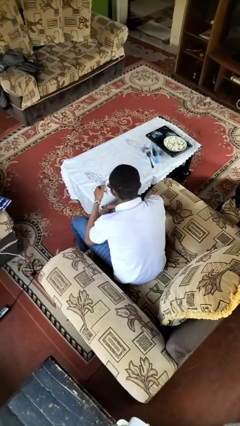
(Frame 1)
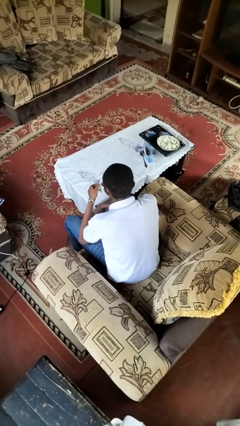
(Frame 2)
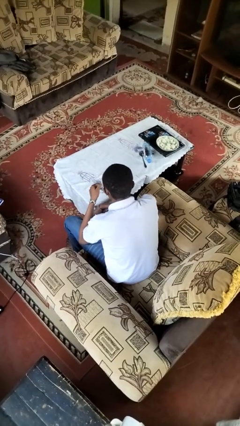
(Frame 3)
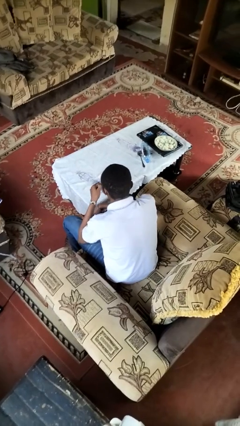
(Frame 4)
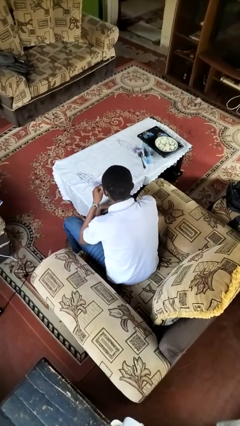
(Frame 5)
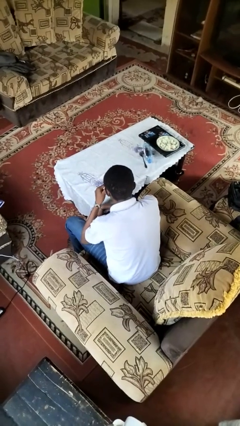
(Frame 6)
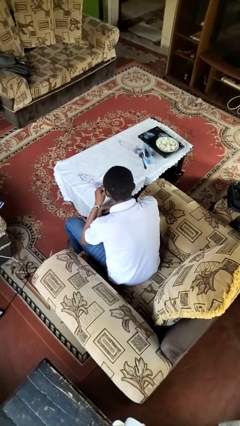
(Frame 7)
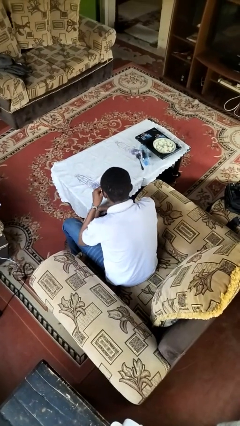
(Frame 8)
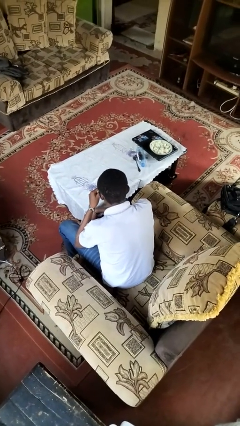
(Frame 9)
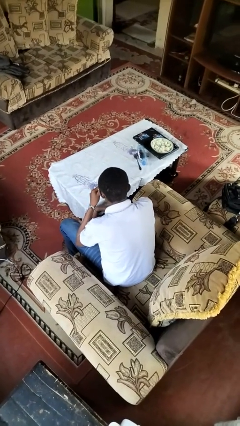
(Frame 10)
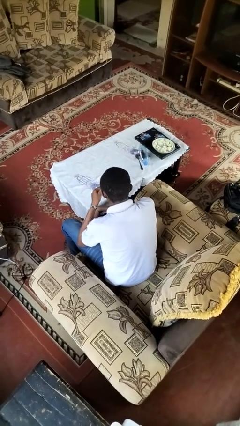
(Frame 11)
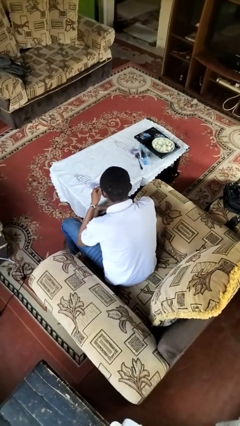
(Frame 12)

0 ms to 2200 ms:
person drinks from mug

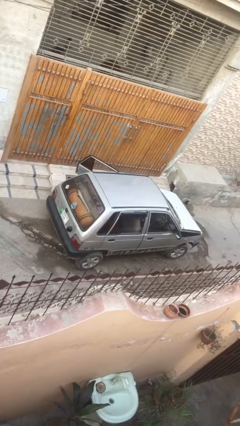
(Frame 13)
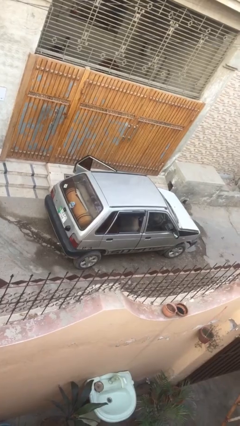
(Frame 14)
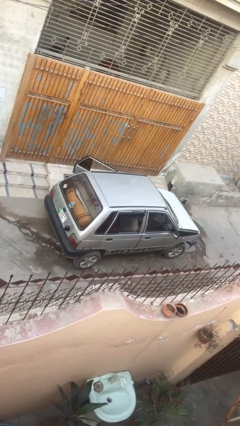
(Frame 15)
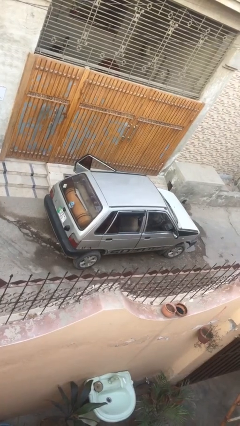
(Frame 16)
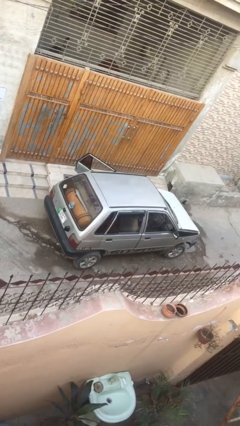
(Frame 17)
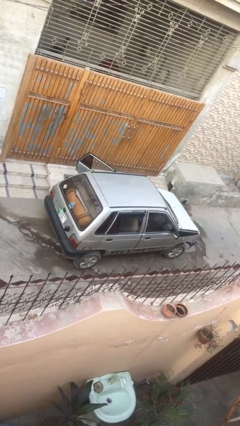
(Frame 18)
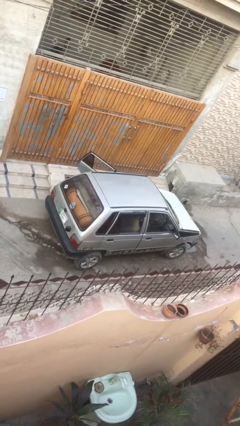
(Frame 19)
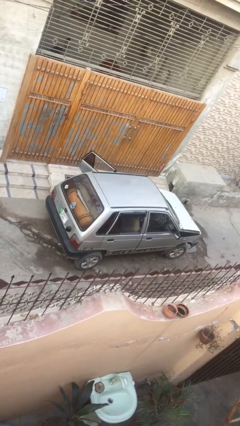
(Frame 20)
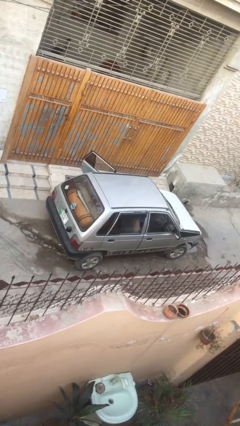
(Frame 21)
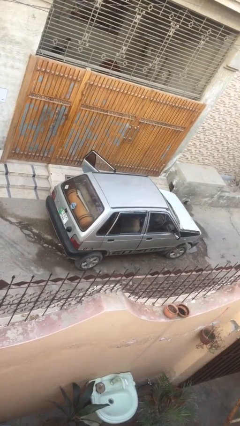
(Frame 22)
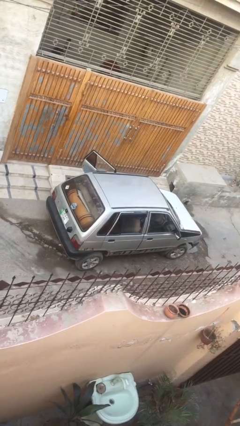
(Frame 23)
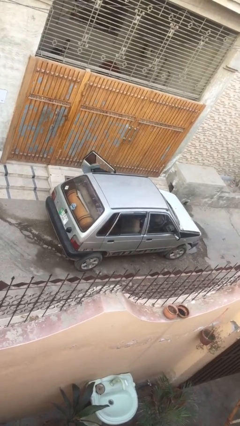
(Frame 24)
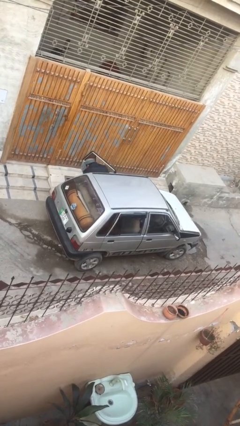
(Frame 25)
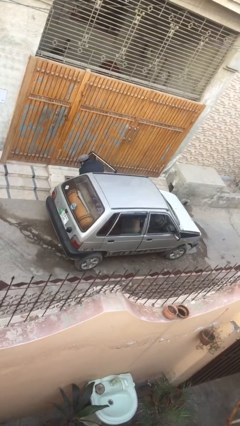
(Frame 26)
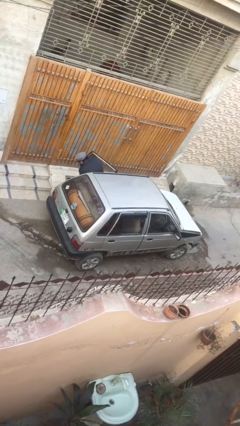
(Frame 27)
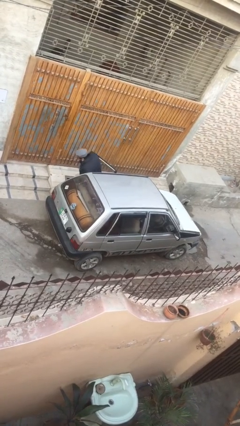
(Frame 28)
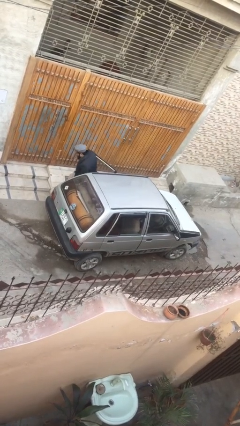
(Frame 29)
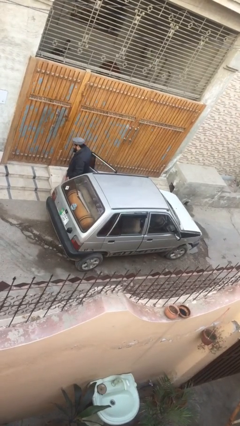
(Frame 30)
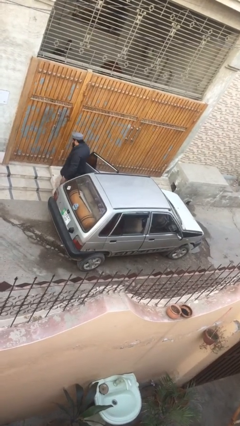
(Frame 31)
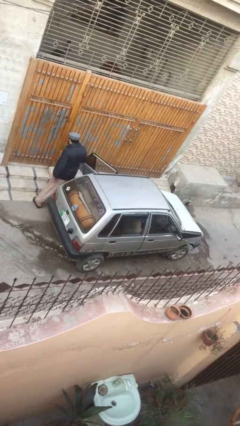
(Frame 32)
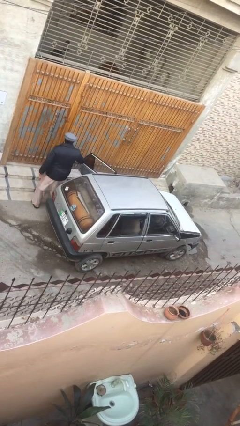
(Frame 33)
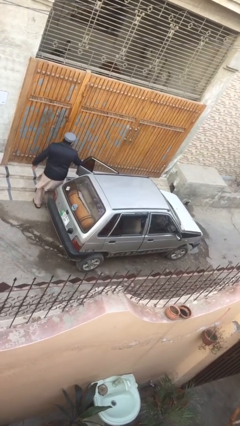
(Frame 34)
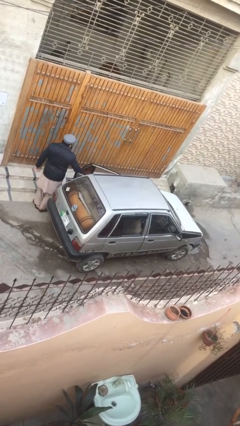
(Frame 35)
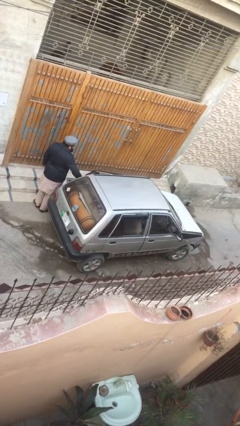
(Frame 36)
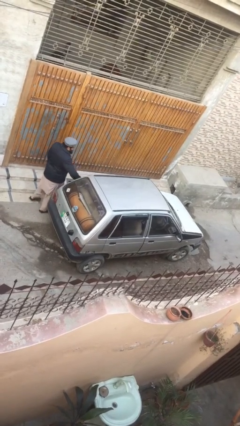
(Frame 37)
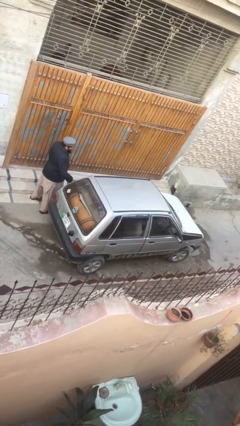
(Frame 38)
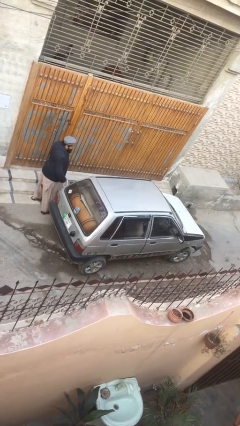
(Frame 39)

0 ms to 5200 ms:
car drops off person

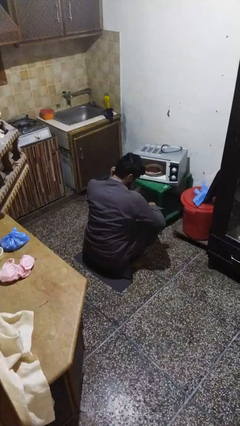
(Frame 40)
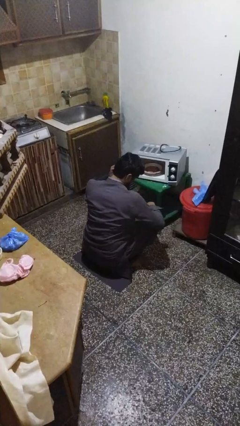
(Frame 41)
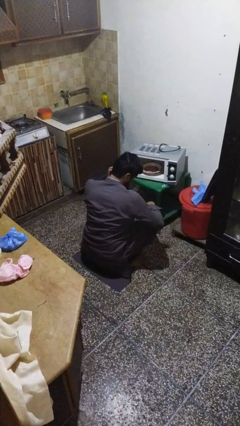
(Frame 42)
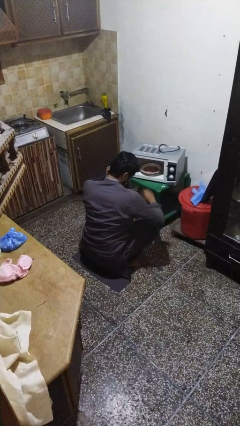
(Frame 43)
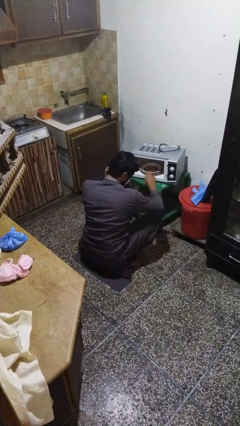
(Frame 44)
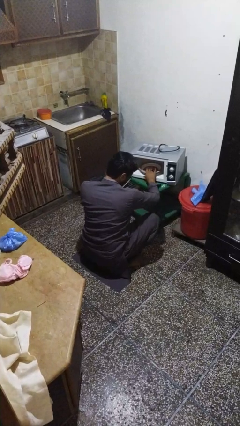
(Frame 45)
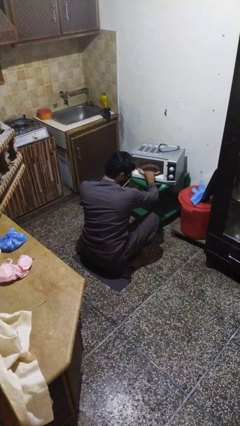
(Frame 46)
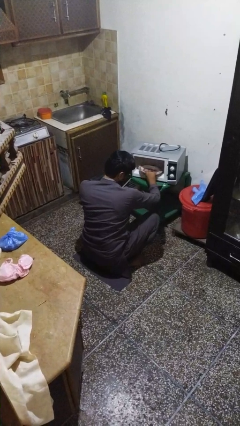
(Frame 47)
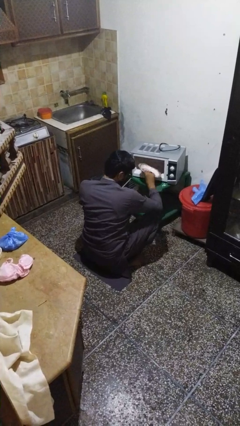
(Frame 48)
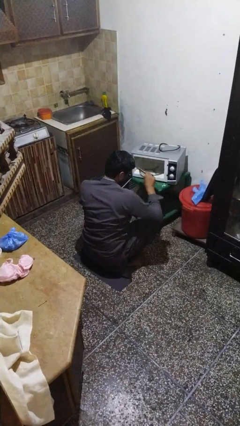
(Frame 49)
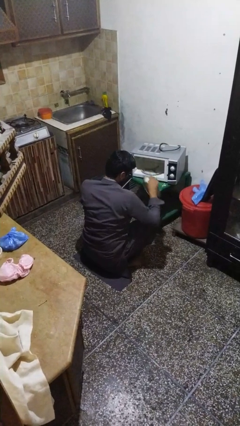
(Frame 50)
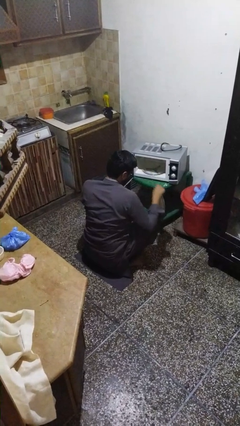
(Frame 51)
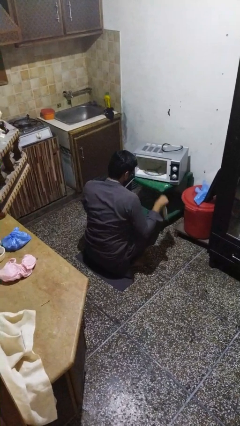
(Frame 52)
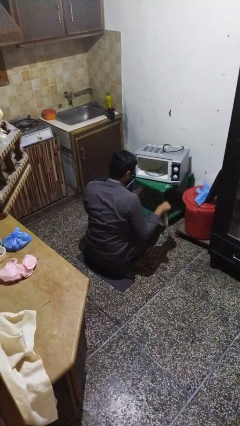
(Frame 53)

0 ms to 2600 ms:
person takes object from microwave

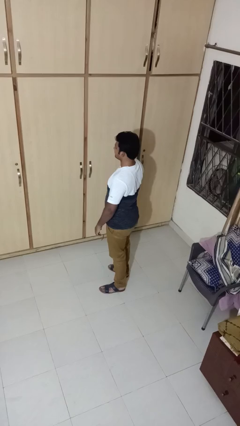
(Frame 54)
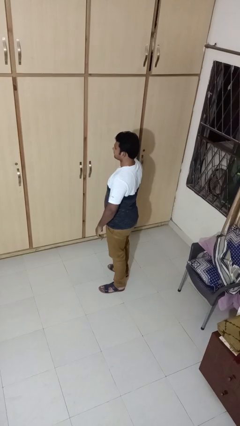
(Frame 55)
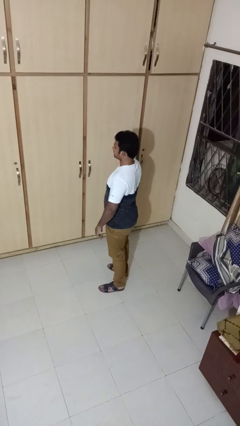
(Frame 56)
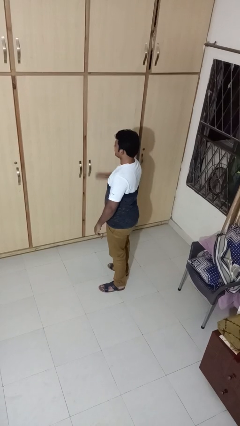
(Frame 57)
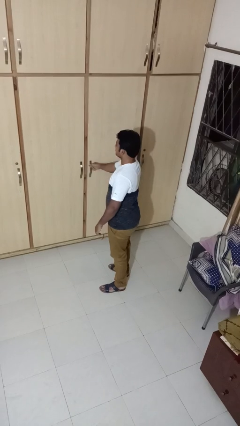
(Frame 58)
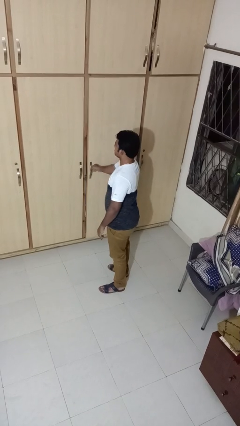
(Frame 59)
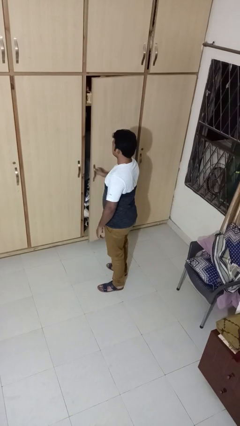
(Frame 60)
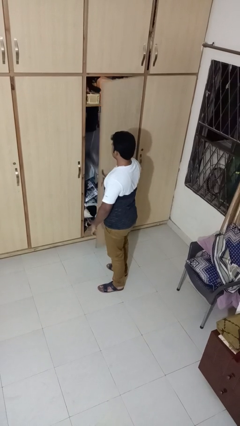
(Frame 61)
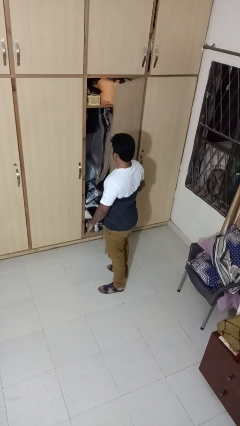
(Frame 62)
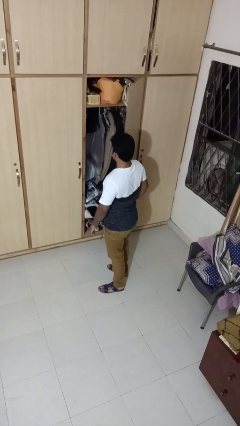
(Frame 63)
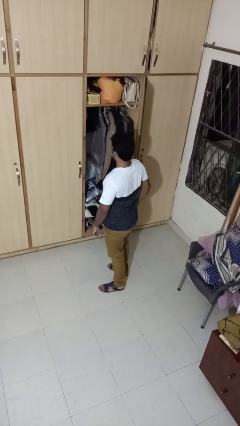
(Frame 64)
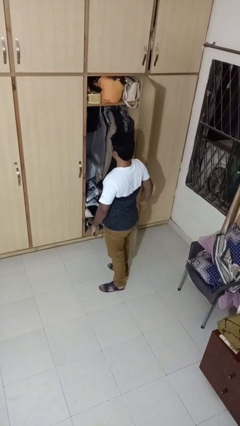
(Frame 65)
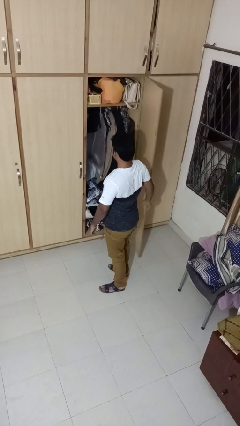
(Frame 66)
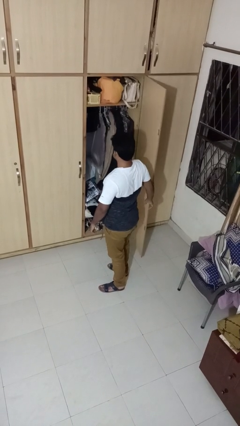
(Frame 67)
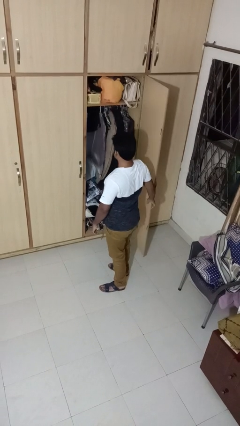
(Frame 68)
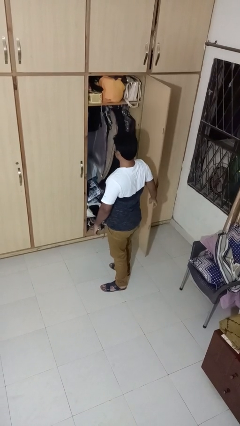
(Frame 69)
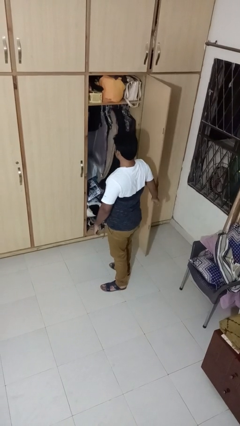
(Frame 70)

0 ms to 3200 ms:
person opens closet door

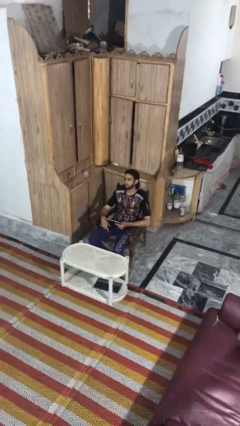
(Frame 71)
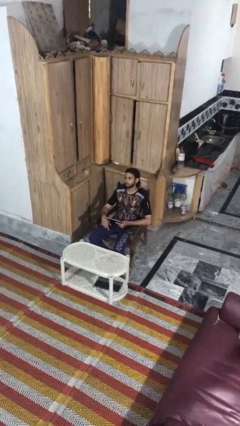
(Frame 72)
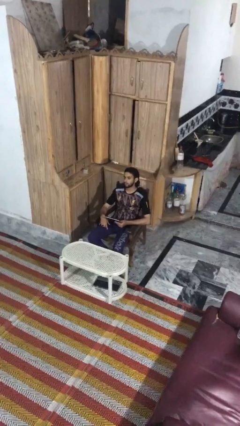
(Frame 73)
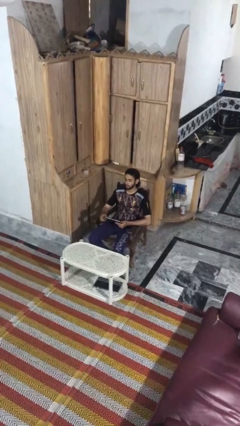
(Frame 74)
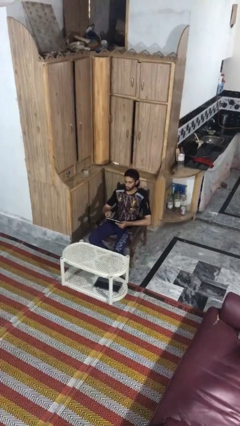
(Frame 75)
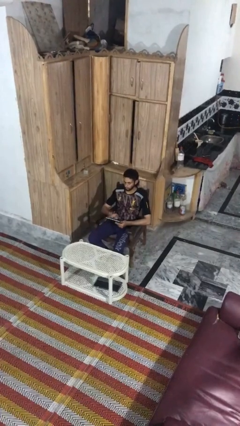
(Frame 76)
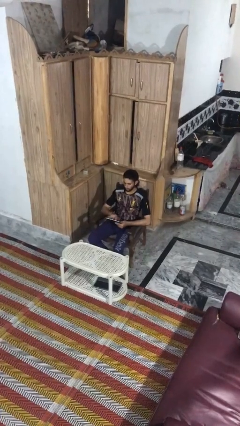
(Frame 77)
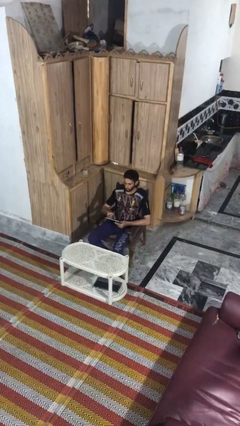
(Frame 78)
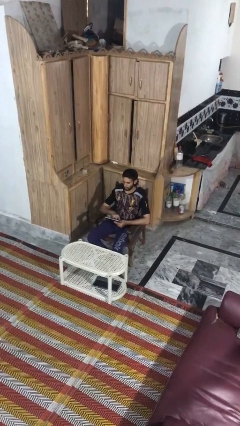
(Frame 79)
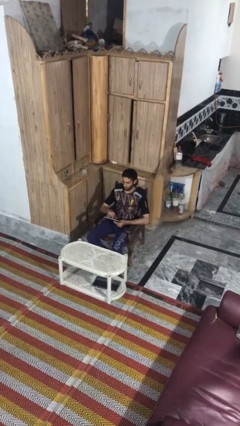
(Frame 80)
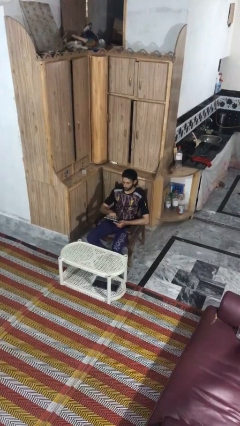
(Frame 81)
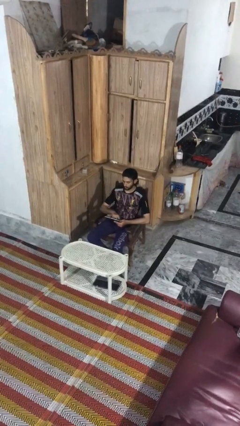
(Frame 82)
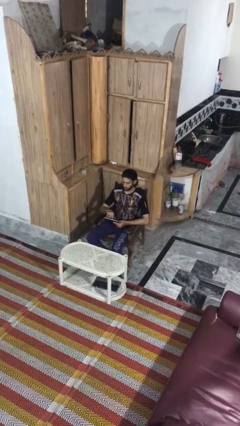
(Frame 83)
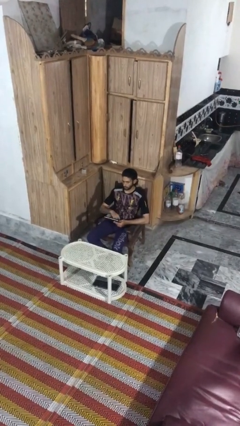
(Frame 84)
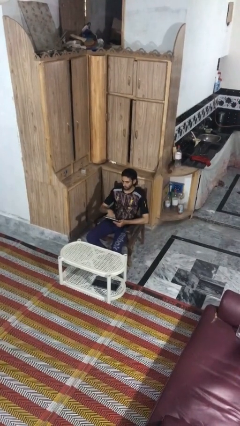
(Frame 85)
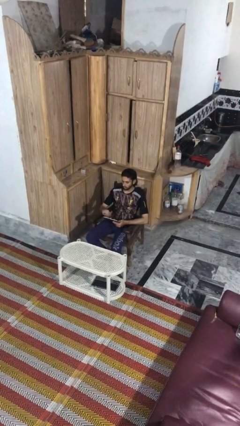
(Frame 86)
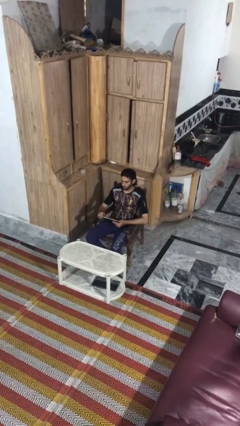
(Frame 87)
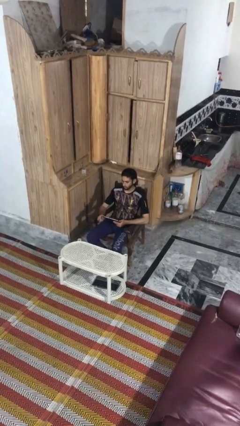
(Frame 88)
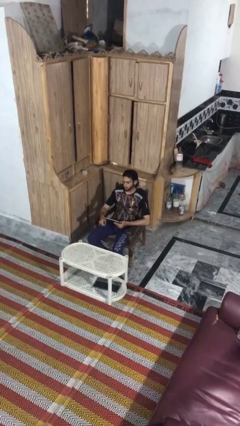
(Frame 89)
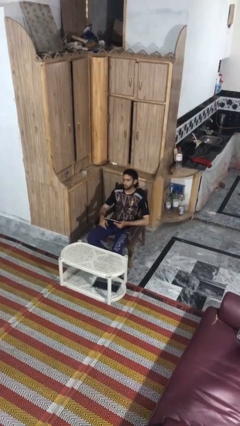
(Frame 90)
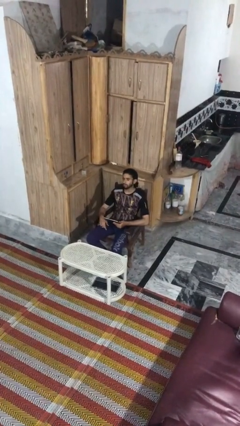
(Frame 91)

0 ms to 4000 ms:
person interacts with tablet

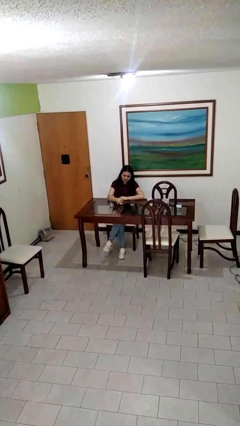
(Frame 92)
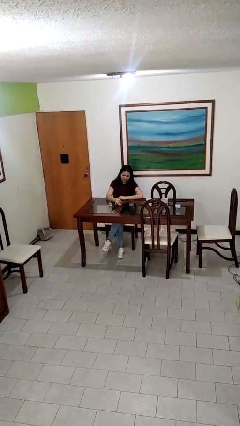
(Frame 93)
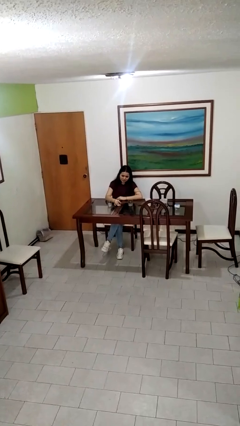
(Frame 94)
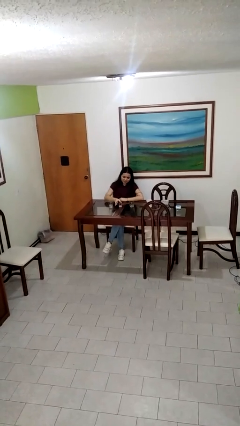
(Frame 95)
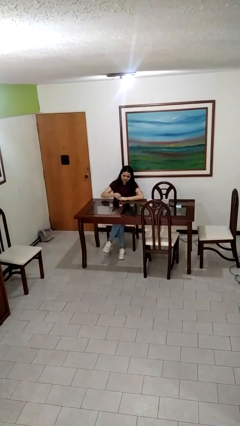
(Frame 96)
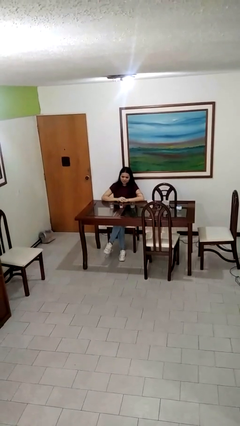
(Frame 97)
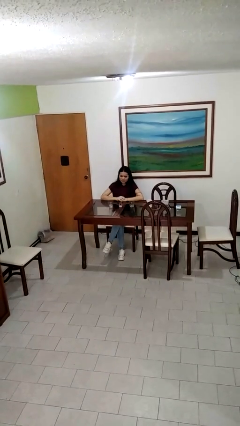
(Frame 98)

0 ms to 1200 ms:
person puts down object on table
